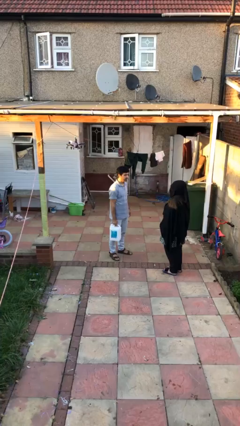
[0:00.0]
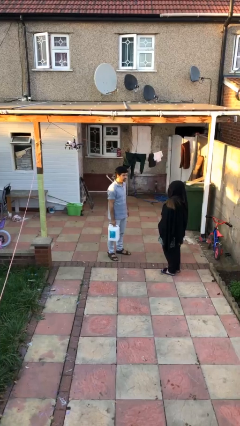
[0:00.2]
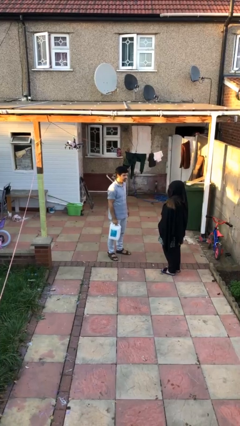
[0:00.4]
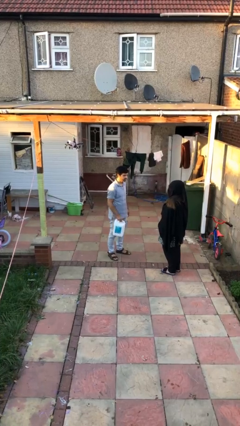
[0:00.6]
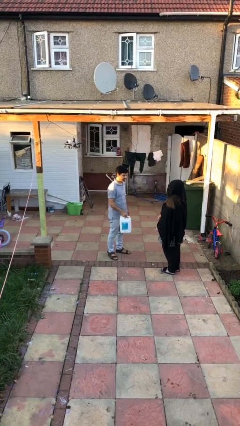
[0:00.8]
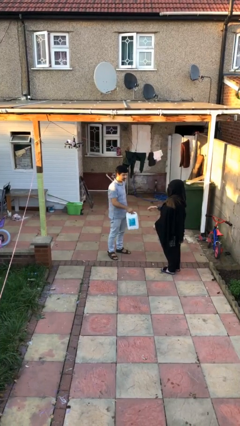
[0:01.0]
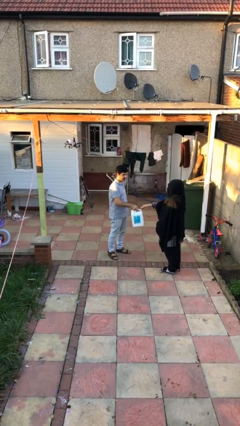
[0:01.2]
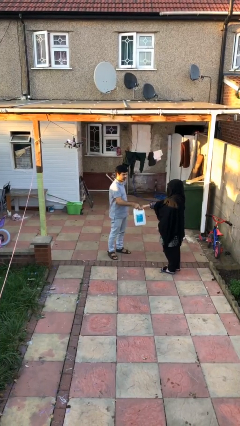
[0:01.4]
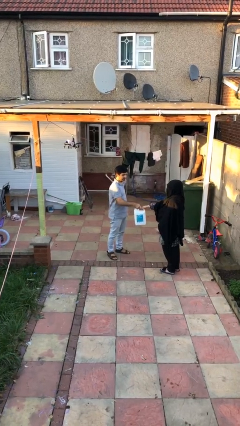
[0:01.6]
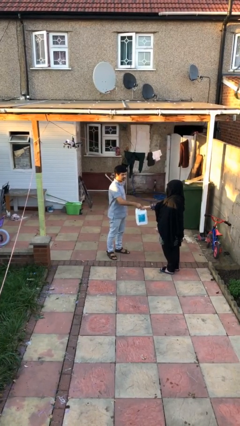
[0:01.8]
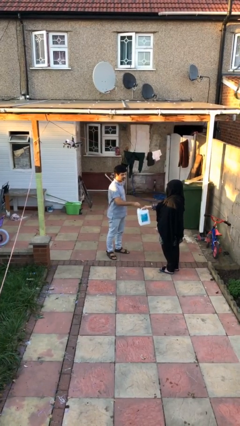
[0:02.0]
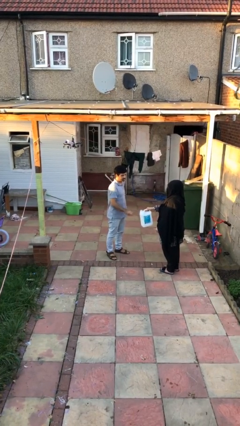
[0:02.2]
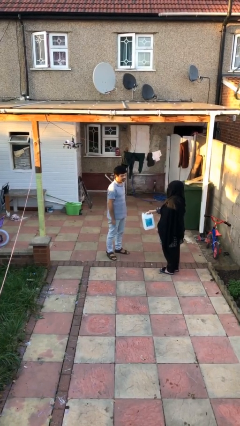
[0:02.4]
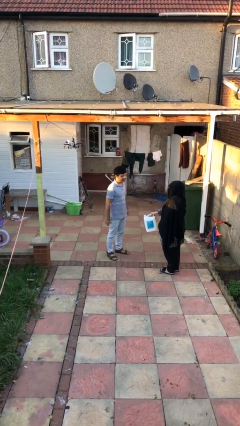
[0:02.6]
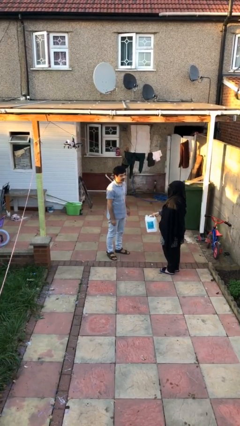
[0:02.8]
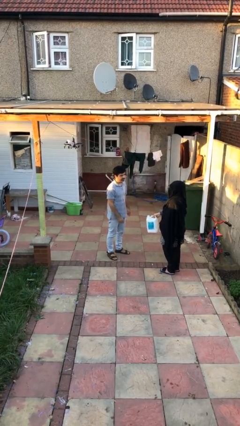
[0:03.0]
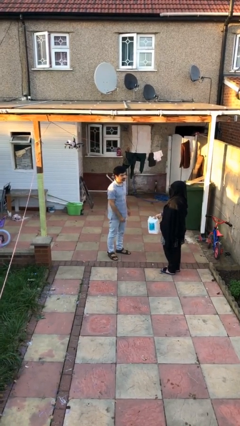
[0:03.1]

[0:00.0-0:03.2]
person transfers object to person

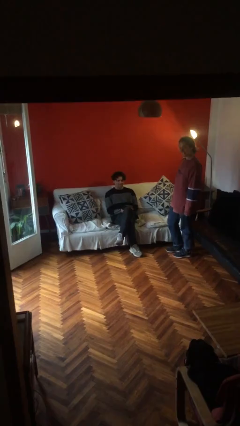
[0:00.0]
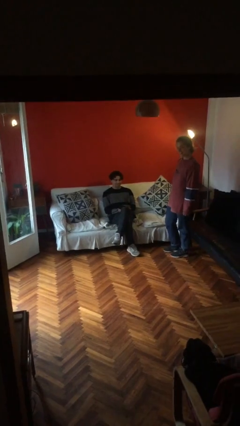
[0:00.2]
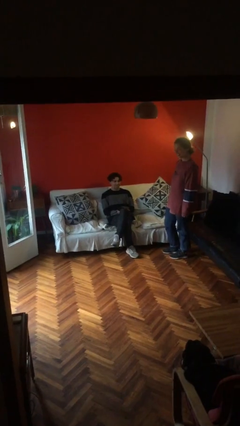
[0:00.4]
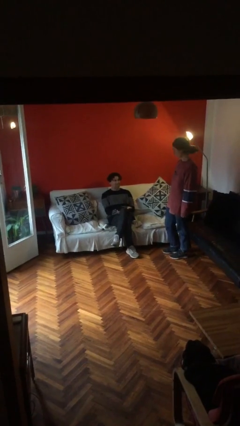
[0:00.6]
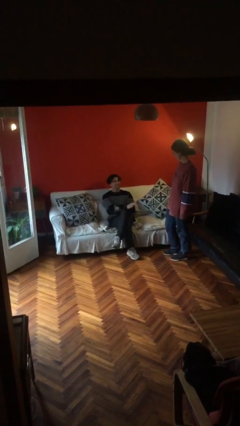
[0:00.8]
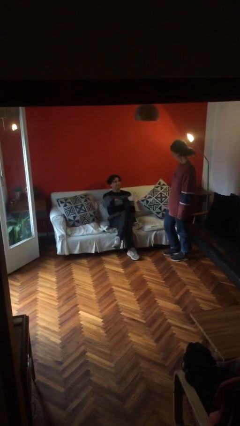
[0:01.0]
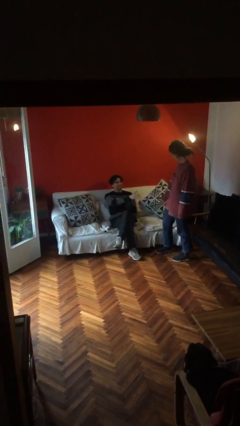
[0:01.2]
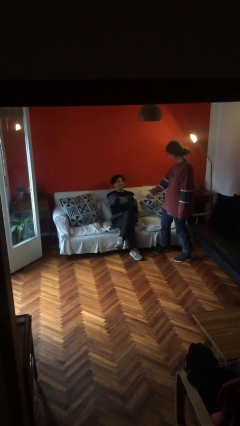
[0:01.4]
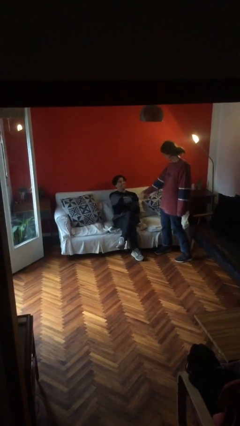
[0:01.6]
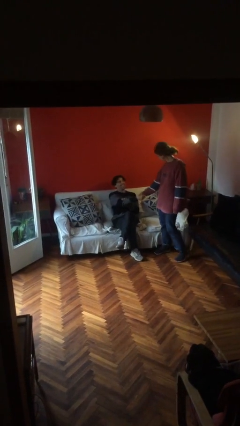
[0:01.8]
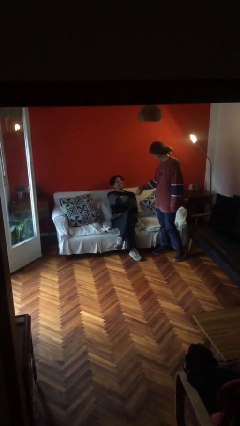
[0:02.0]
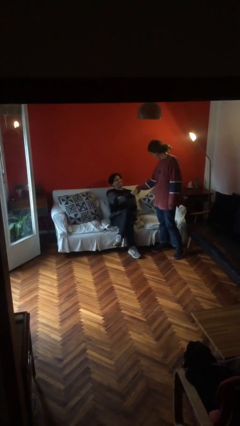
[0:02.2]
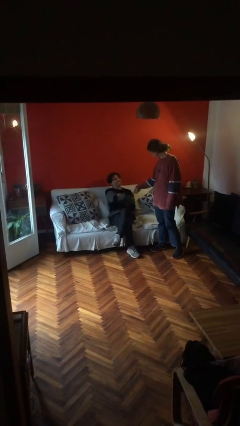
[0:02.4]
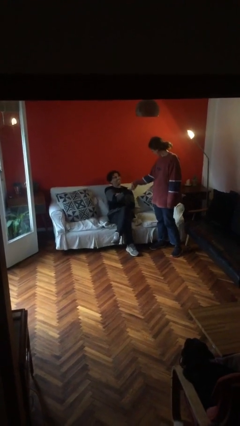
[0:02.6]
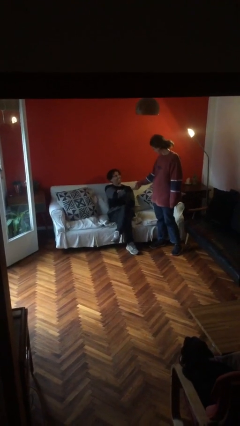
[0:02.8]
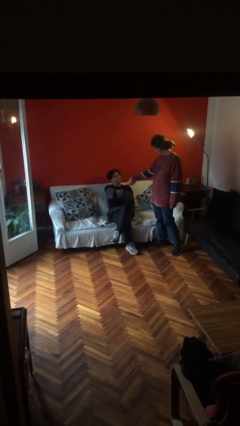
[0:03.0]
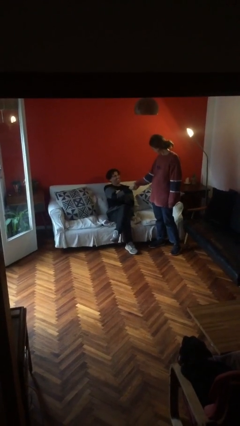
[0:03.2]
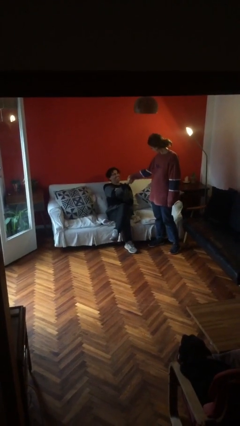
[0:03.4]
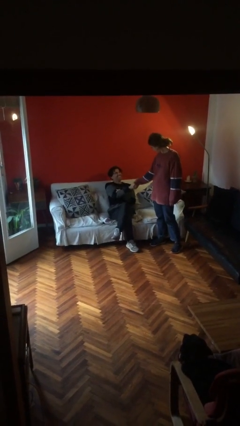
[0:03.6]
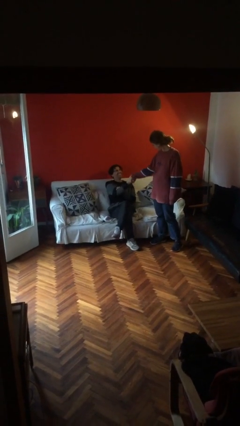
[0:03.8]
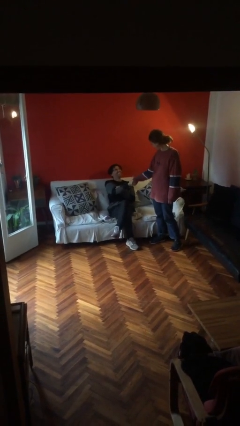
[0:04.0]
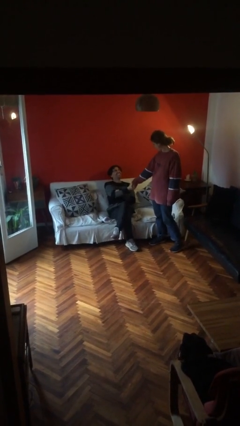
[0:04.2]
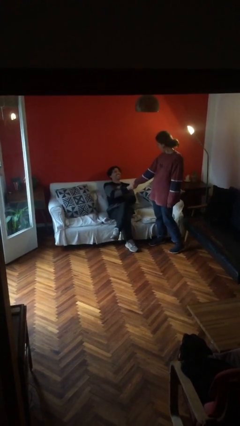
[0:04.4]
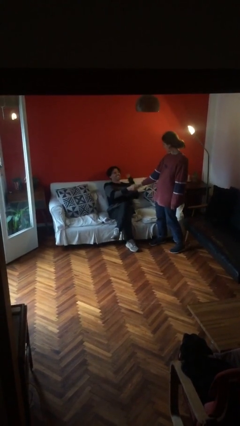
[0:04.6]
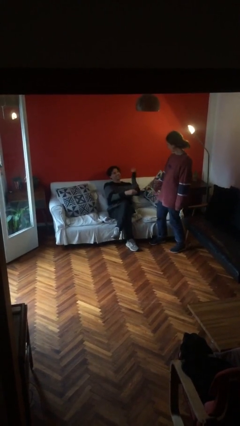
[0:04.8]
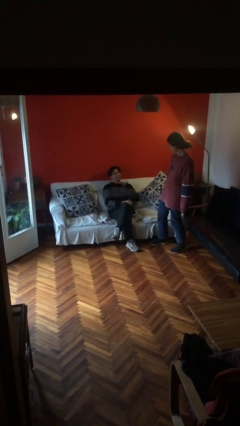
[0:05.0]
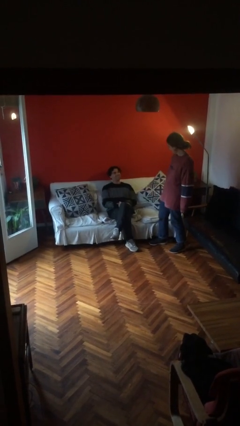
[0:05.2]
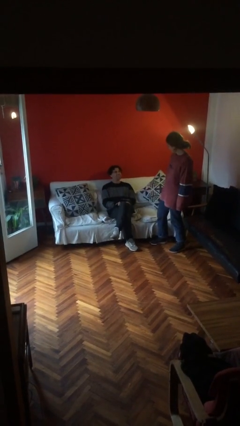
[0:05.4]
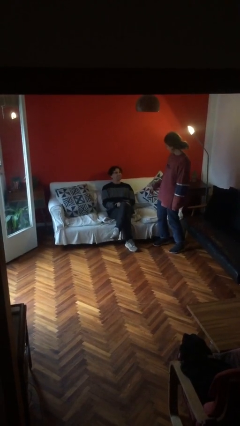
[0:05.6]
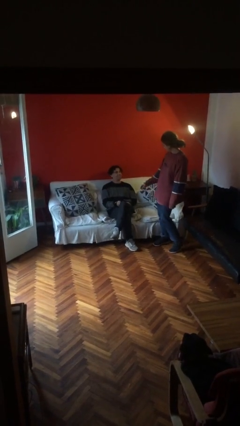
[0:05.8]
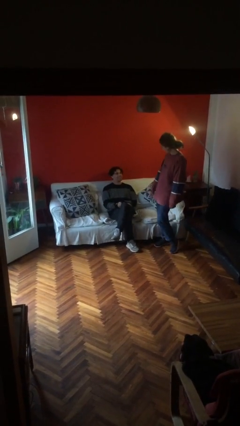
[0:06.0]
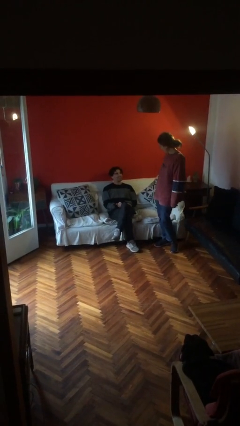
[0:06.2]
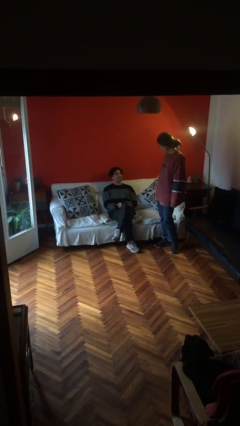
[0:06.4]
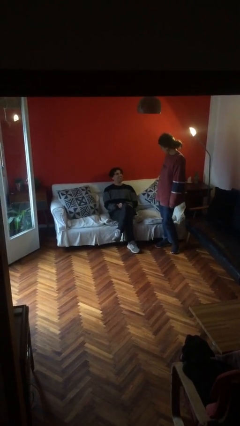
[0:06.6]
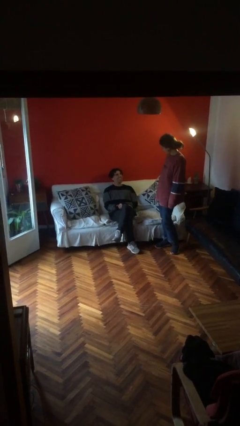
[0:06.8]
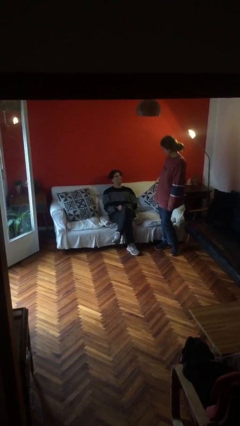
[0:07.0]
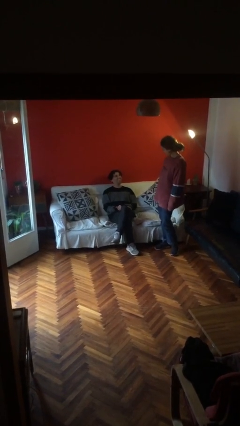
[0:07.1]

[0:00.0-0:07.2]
person shakes hand

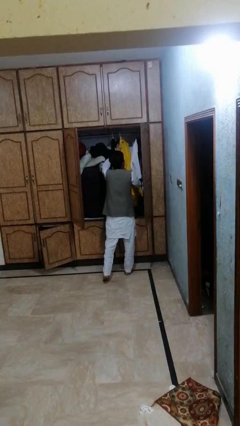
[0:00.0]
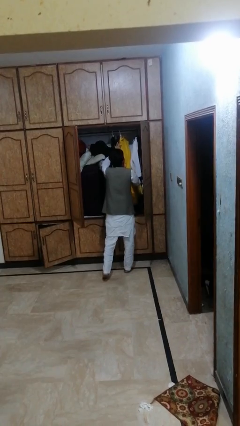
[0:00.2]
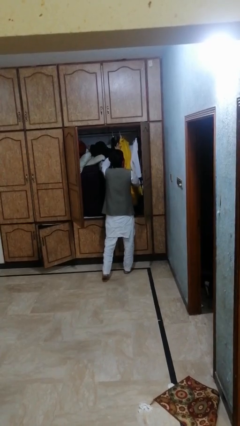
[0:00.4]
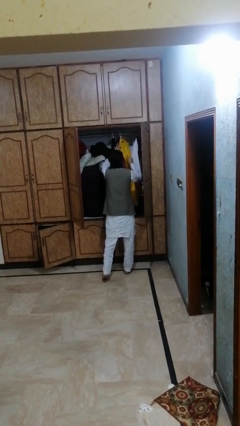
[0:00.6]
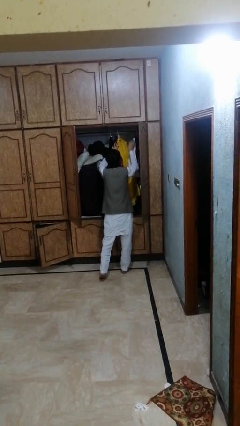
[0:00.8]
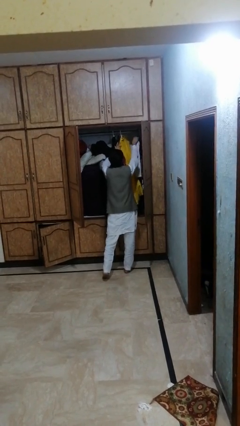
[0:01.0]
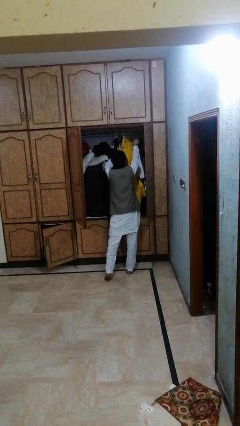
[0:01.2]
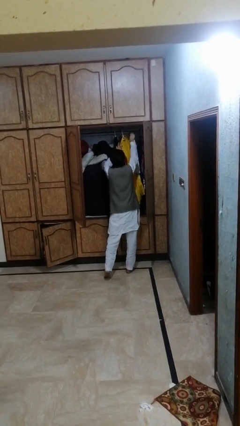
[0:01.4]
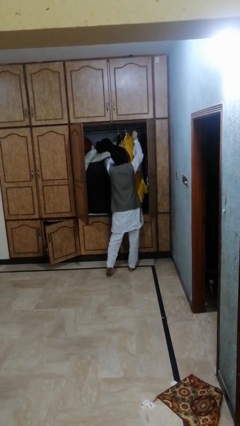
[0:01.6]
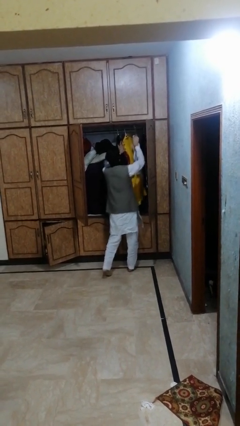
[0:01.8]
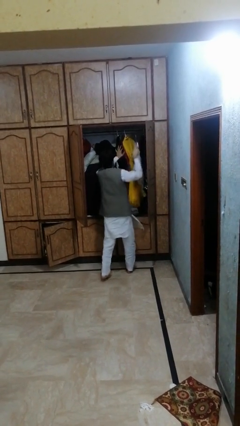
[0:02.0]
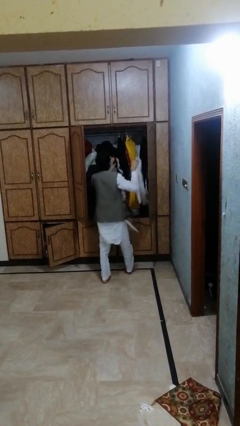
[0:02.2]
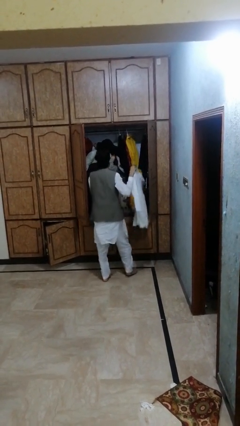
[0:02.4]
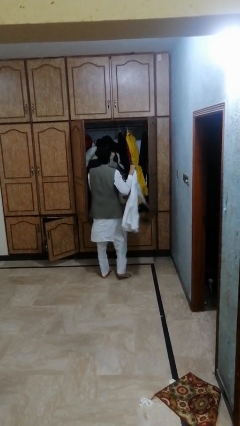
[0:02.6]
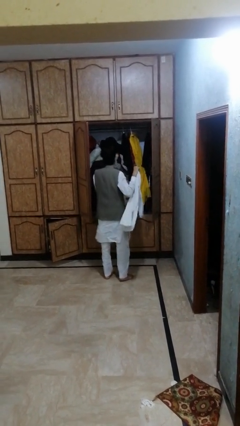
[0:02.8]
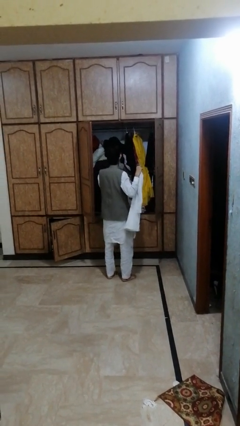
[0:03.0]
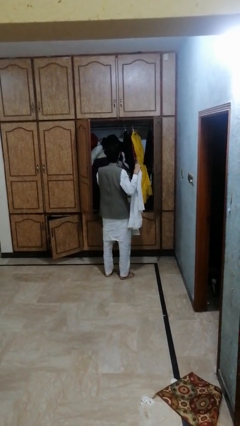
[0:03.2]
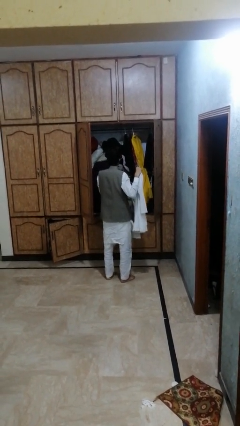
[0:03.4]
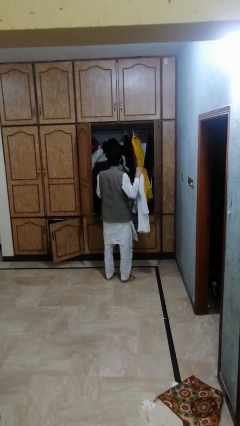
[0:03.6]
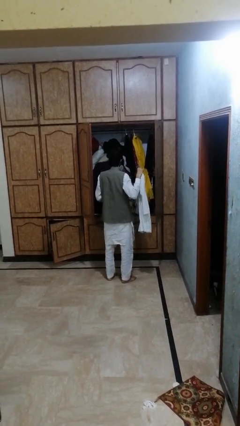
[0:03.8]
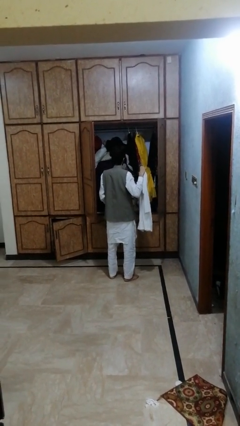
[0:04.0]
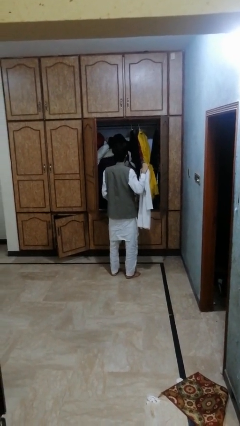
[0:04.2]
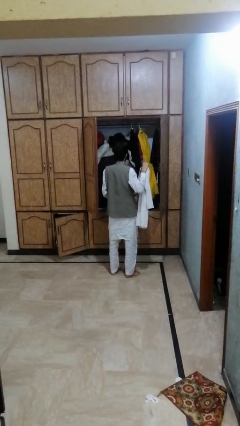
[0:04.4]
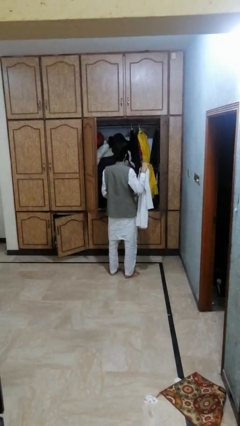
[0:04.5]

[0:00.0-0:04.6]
person takes clothes from dresser

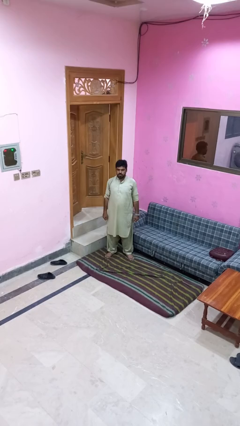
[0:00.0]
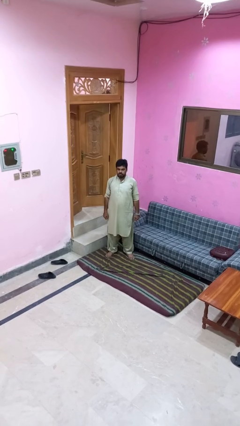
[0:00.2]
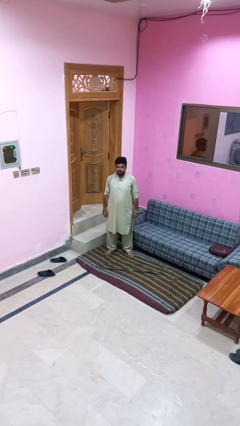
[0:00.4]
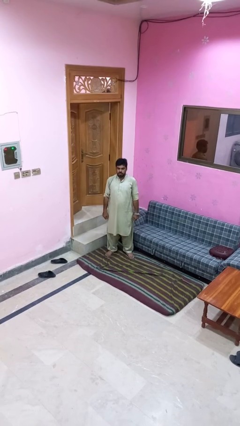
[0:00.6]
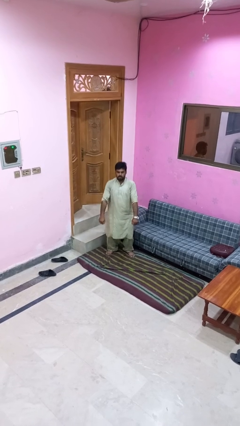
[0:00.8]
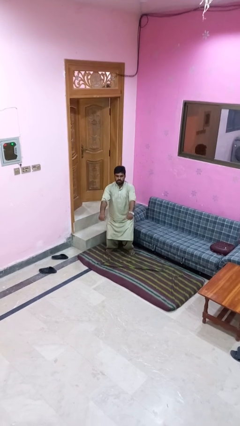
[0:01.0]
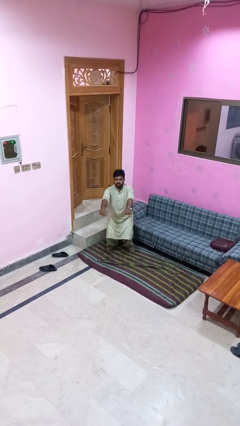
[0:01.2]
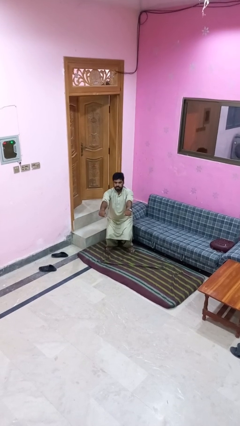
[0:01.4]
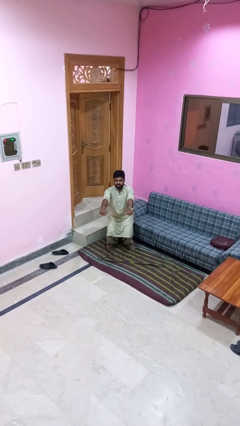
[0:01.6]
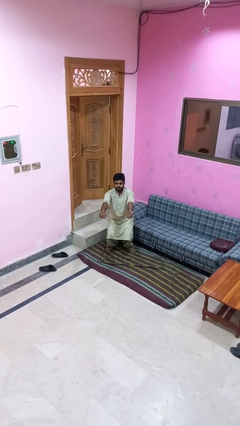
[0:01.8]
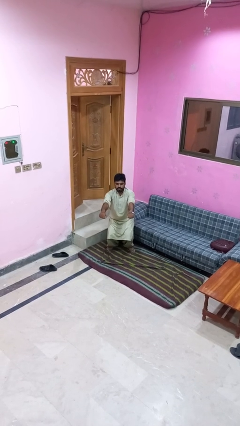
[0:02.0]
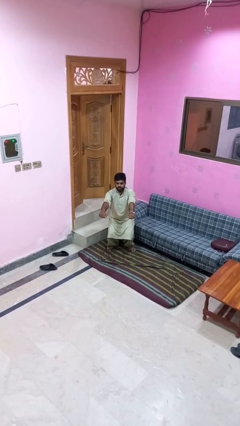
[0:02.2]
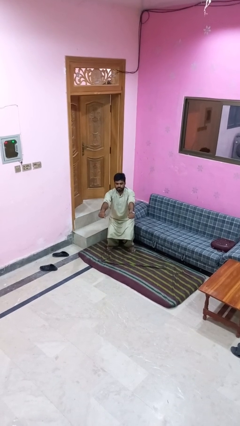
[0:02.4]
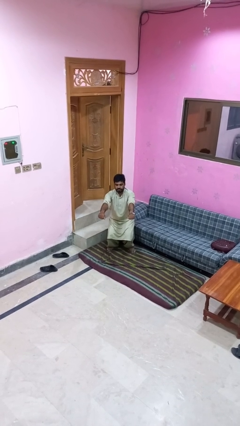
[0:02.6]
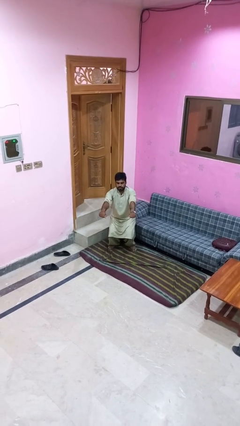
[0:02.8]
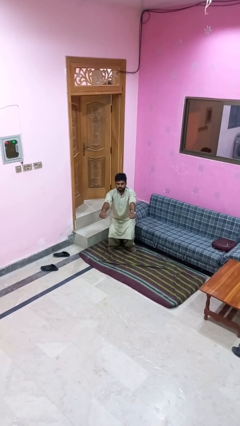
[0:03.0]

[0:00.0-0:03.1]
person squats
